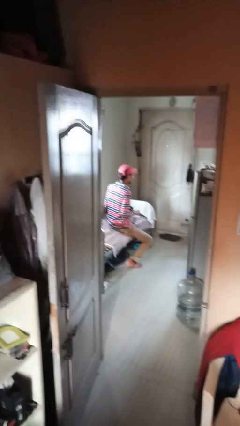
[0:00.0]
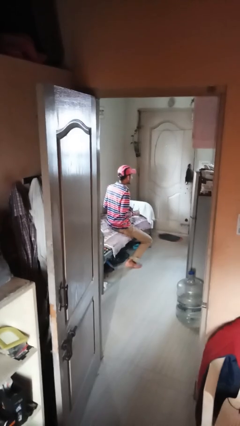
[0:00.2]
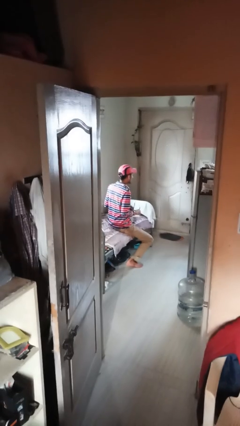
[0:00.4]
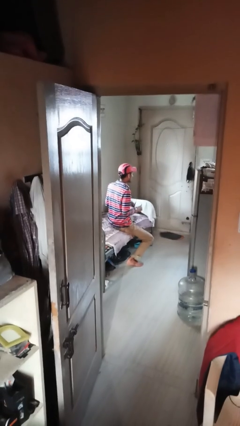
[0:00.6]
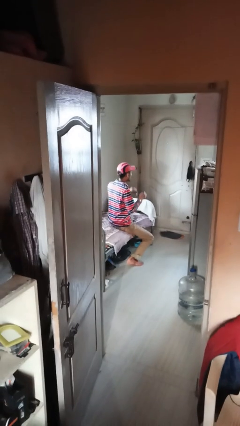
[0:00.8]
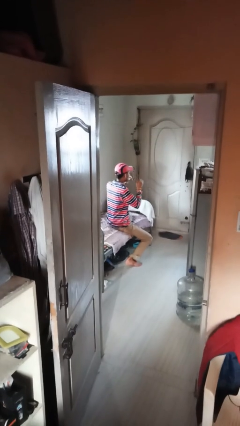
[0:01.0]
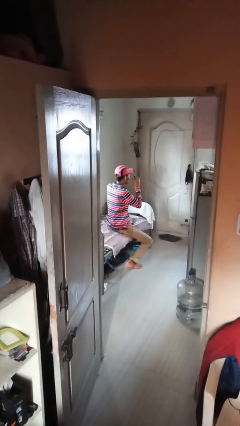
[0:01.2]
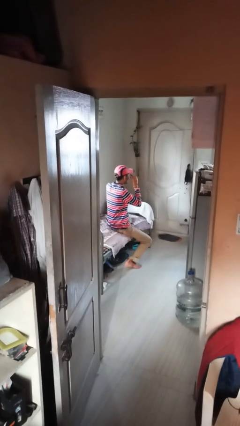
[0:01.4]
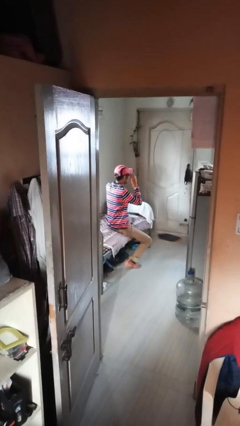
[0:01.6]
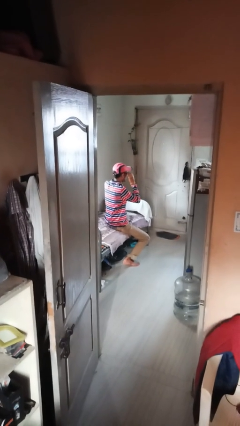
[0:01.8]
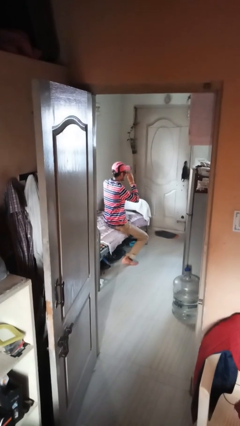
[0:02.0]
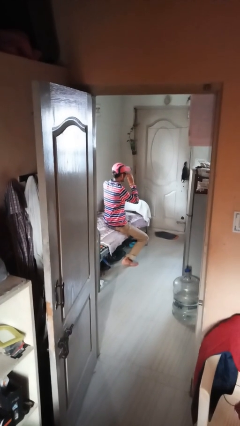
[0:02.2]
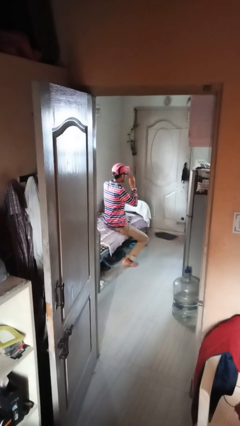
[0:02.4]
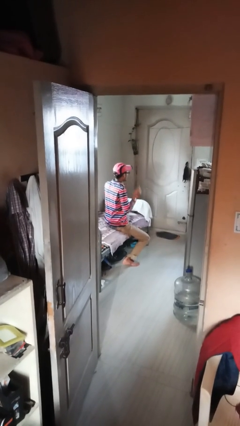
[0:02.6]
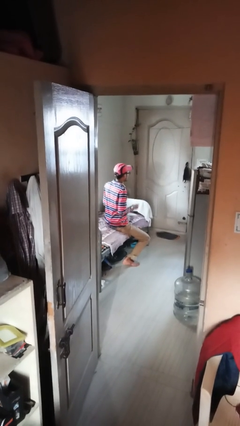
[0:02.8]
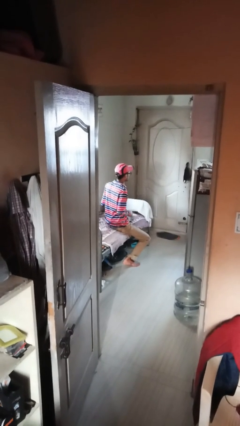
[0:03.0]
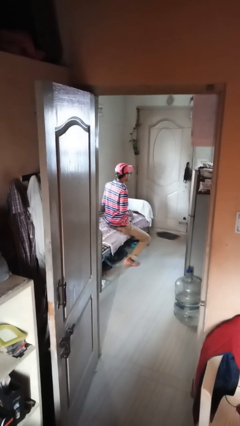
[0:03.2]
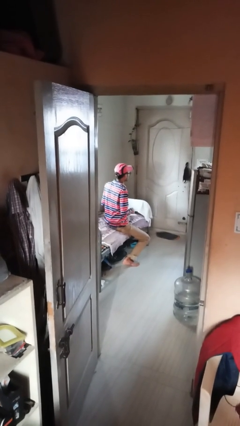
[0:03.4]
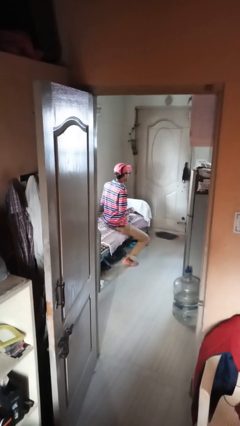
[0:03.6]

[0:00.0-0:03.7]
person puts on glasses

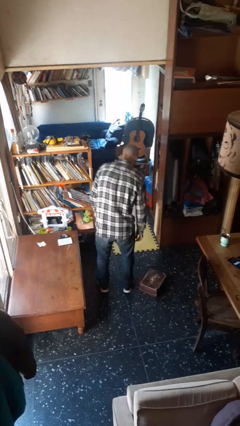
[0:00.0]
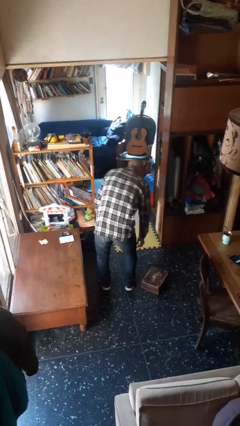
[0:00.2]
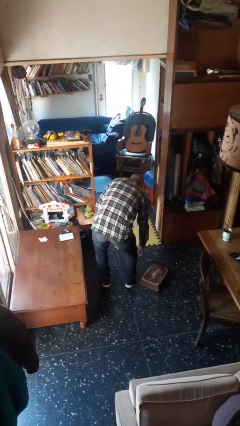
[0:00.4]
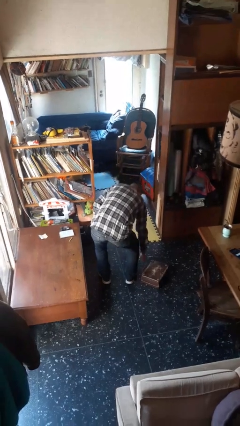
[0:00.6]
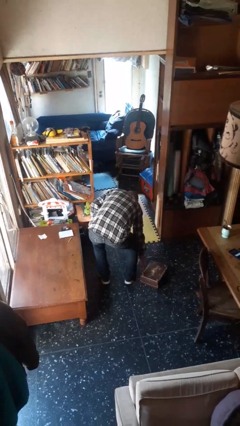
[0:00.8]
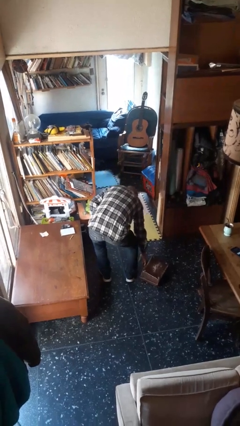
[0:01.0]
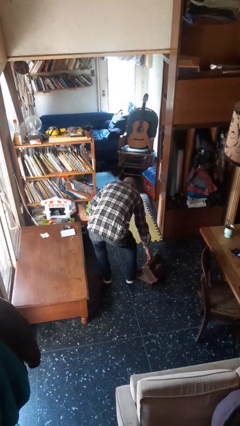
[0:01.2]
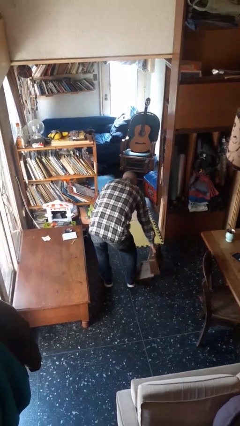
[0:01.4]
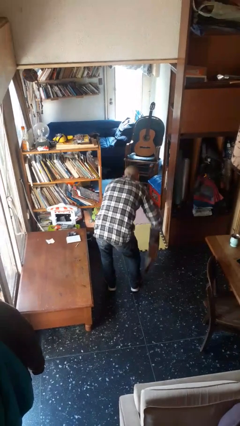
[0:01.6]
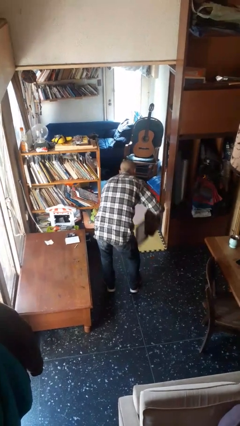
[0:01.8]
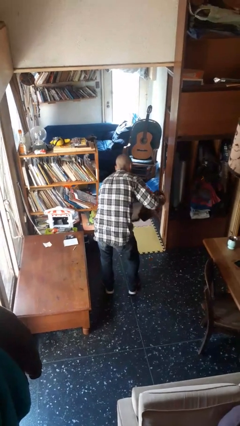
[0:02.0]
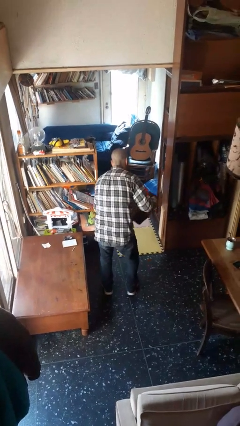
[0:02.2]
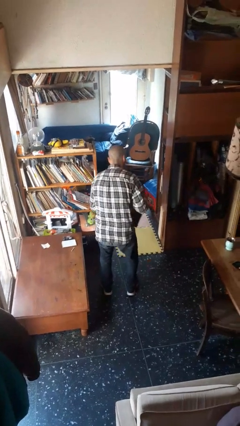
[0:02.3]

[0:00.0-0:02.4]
person picks up object from floor

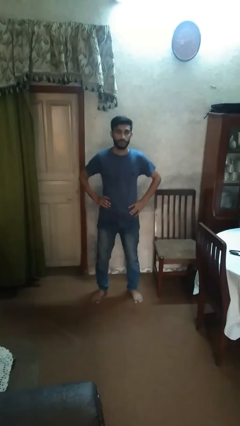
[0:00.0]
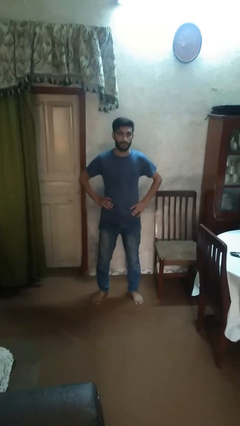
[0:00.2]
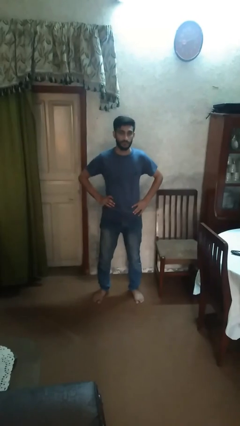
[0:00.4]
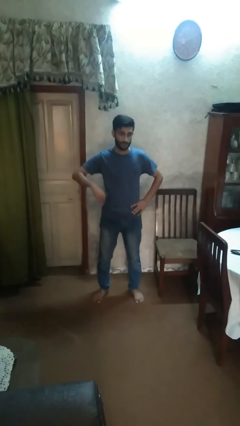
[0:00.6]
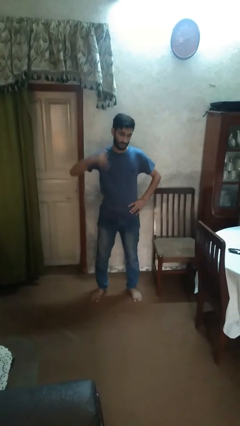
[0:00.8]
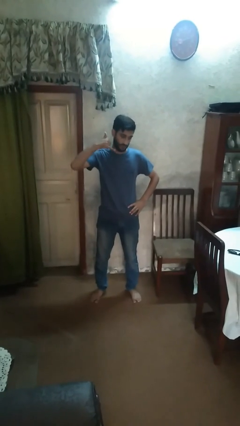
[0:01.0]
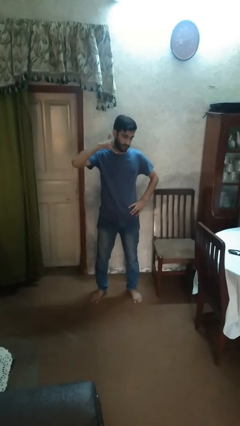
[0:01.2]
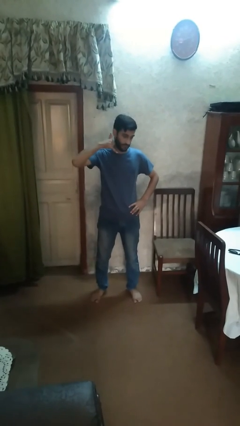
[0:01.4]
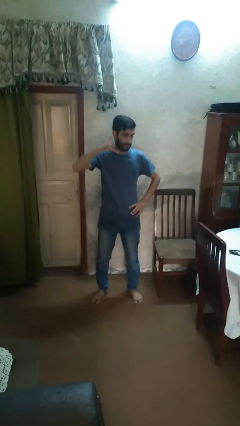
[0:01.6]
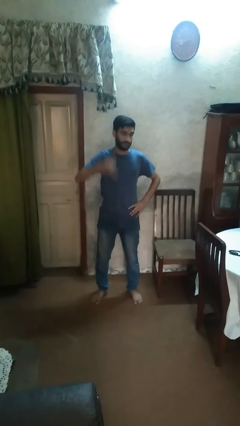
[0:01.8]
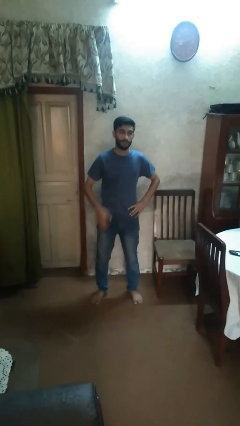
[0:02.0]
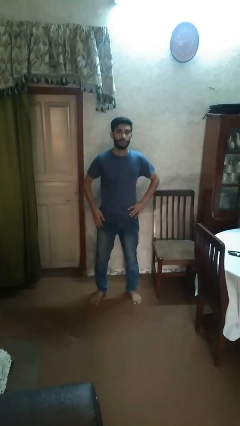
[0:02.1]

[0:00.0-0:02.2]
person gestures call me

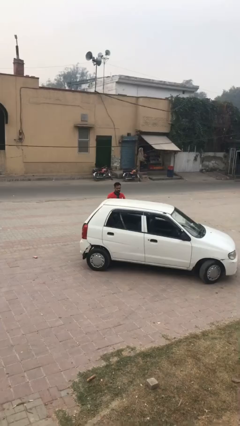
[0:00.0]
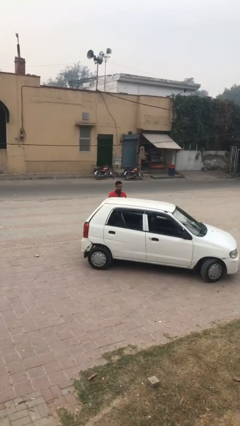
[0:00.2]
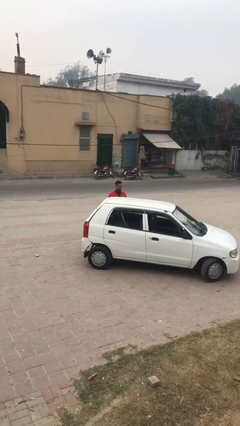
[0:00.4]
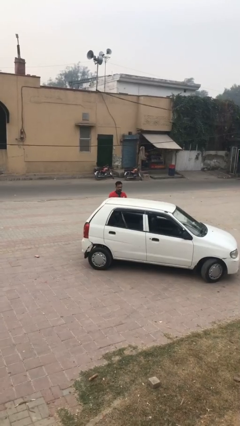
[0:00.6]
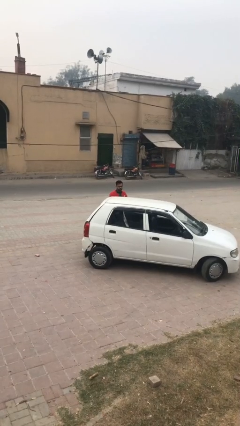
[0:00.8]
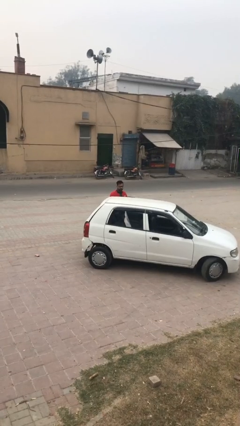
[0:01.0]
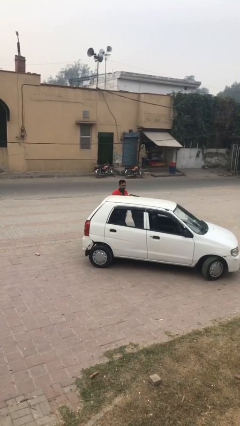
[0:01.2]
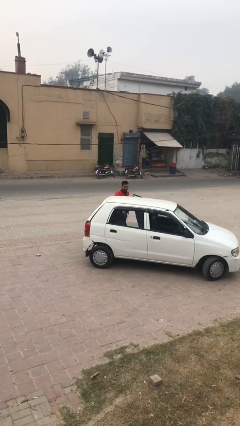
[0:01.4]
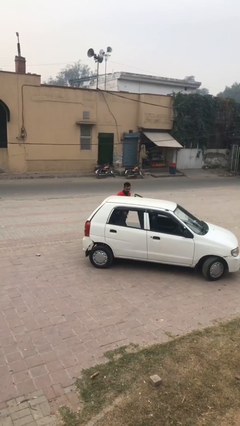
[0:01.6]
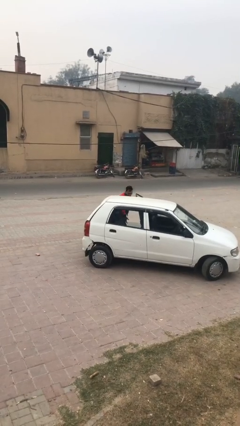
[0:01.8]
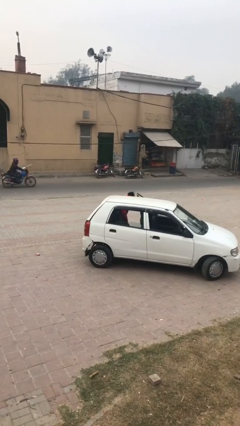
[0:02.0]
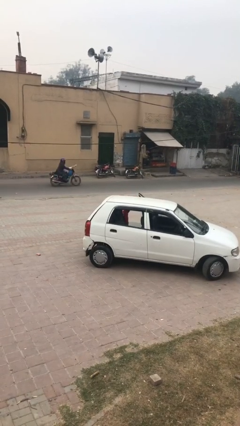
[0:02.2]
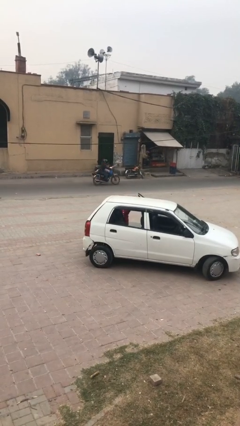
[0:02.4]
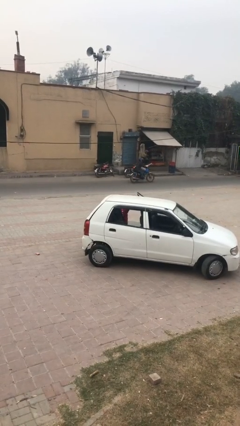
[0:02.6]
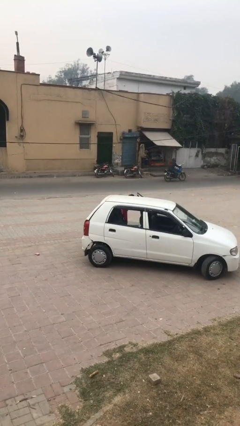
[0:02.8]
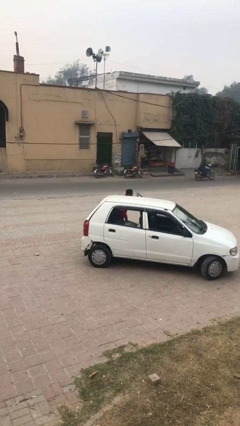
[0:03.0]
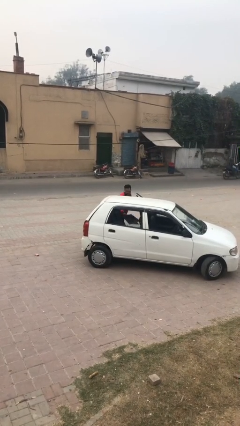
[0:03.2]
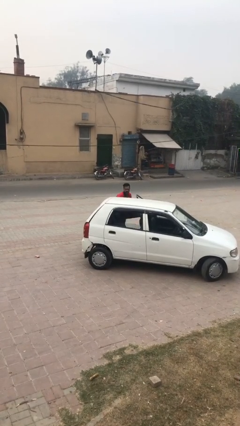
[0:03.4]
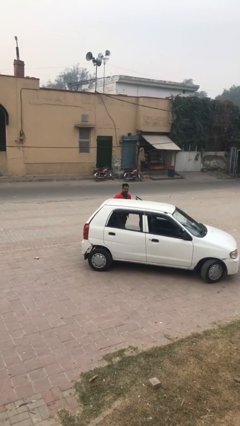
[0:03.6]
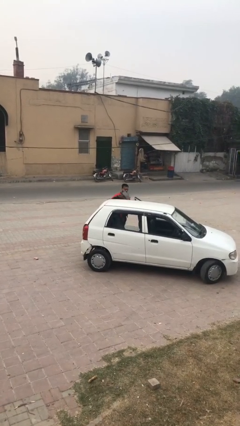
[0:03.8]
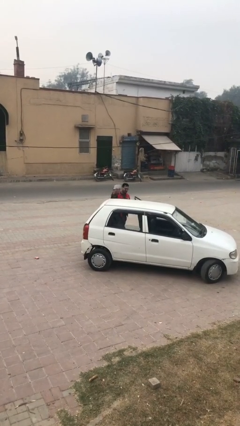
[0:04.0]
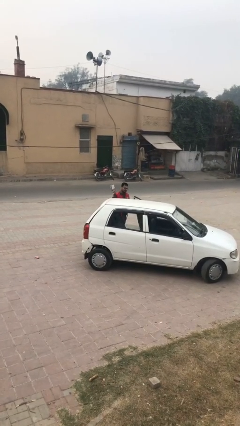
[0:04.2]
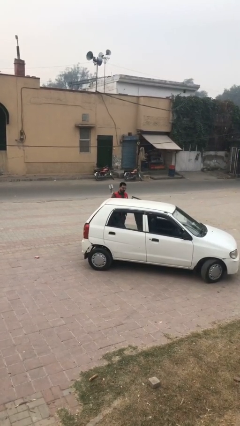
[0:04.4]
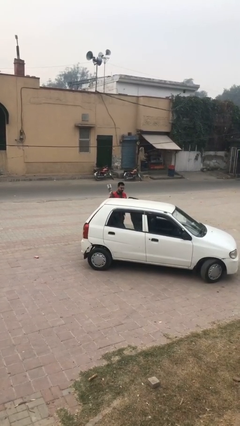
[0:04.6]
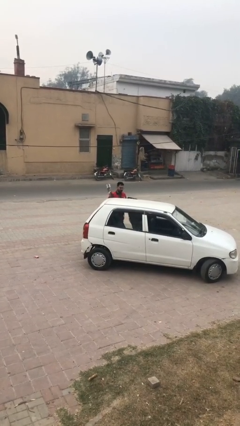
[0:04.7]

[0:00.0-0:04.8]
person unloads car

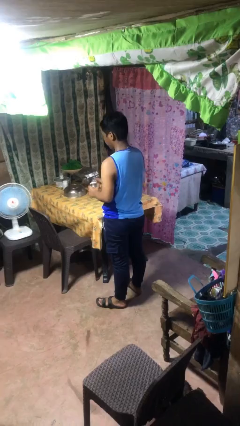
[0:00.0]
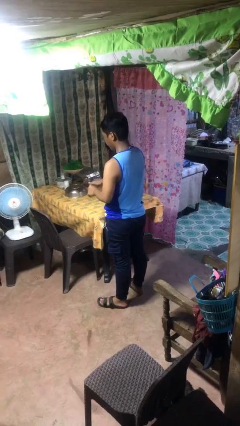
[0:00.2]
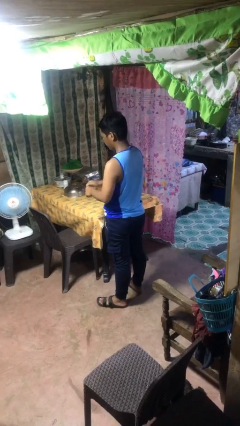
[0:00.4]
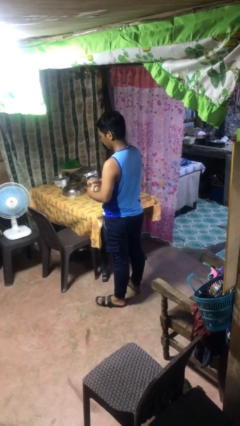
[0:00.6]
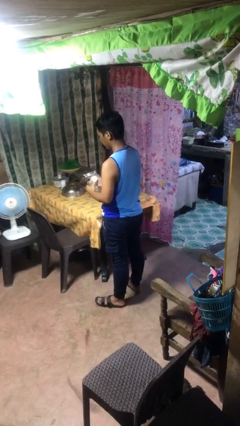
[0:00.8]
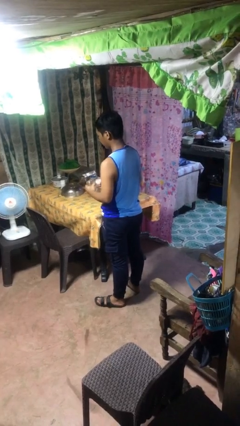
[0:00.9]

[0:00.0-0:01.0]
person opens jar

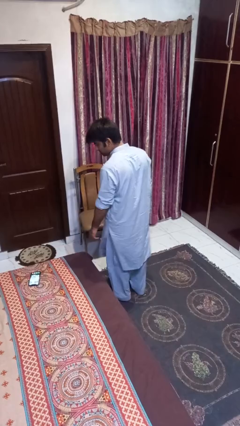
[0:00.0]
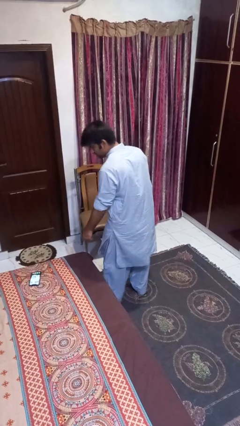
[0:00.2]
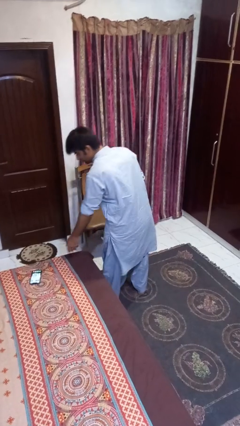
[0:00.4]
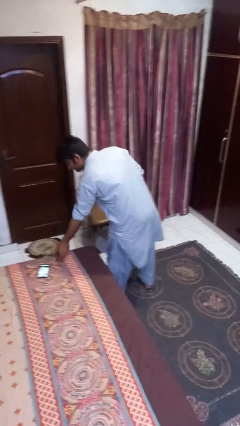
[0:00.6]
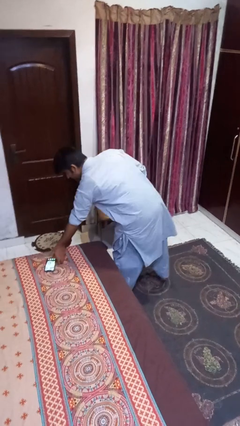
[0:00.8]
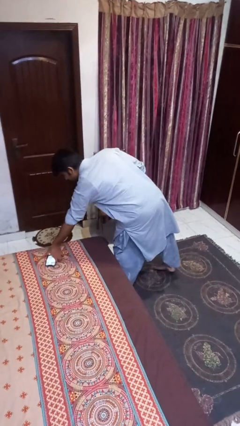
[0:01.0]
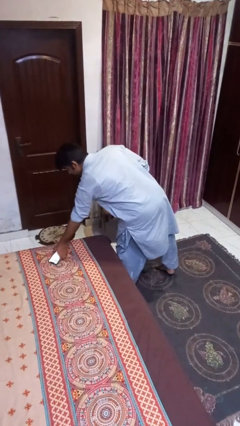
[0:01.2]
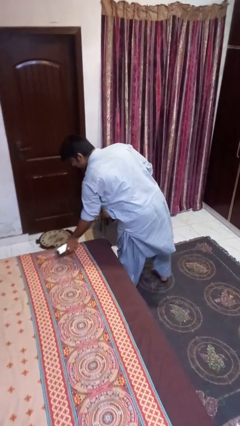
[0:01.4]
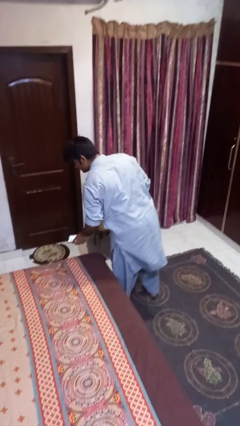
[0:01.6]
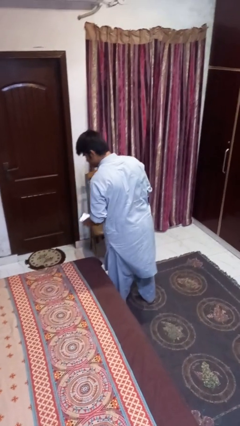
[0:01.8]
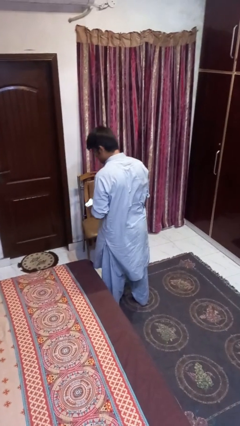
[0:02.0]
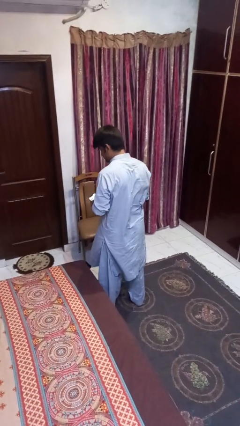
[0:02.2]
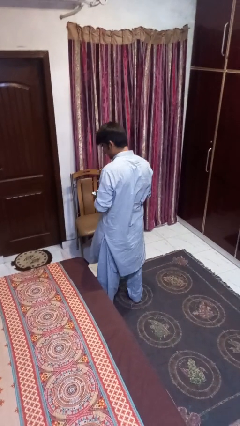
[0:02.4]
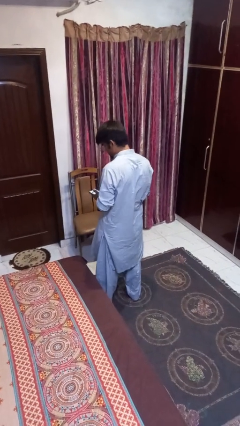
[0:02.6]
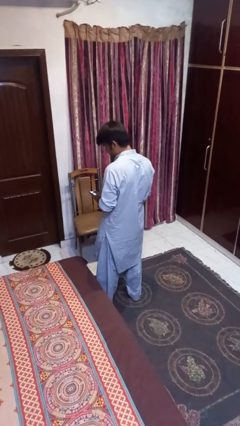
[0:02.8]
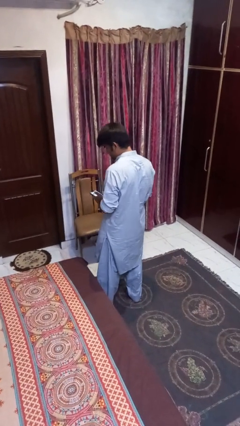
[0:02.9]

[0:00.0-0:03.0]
person picks up object from bed

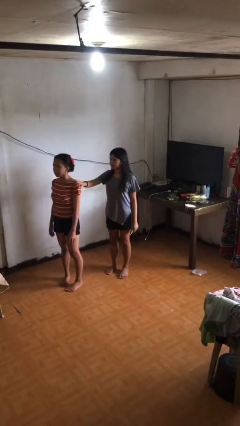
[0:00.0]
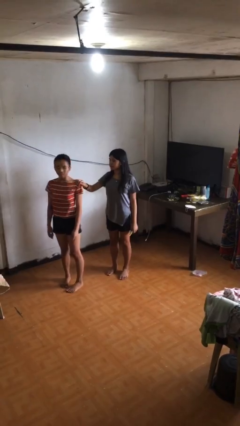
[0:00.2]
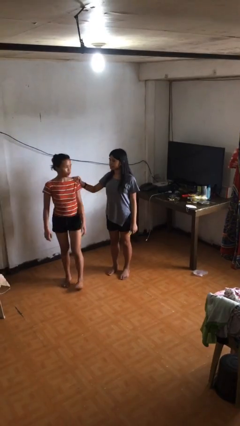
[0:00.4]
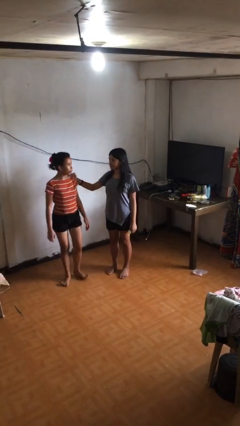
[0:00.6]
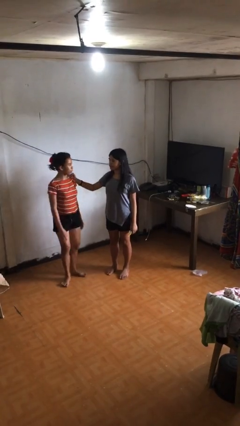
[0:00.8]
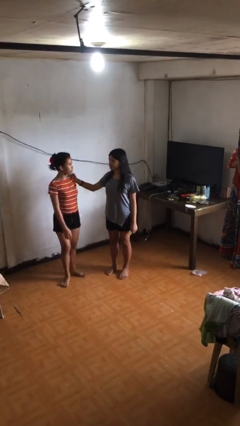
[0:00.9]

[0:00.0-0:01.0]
person spins person around
